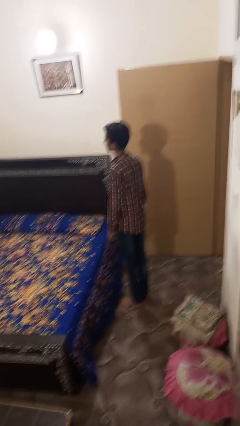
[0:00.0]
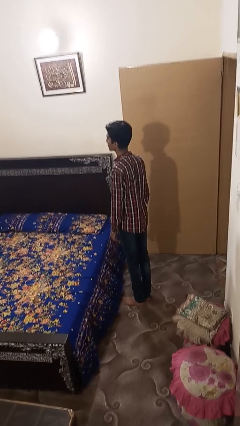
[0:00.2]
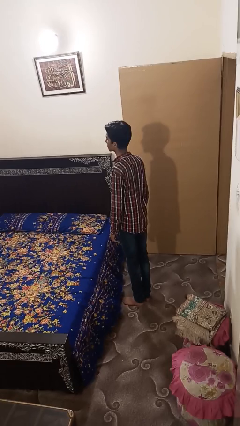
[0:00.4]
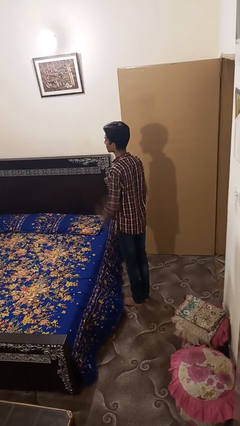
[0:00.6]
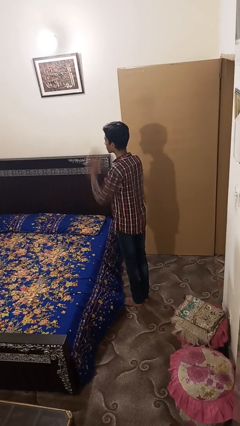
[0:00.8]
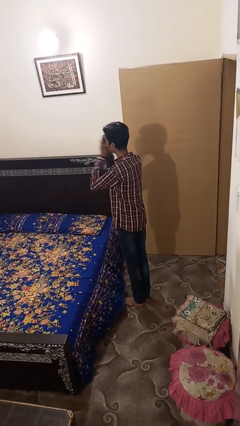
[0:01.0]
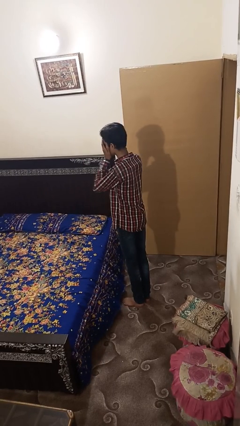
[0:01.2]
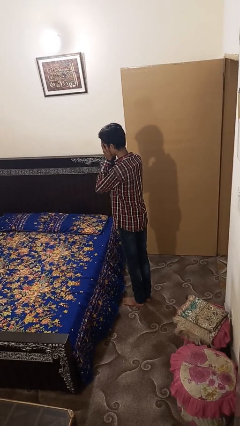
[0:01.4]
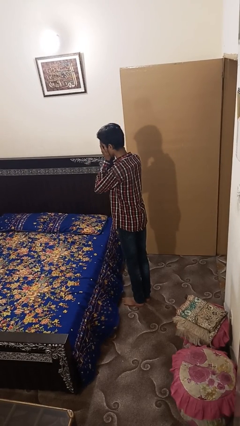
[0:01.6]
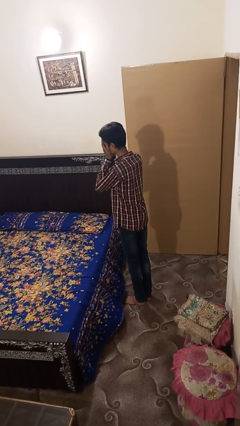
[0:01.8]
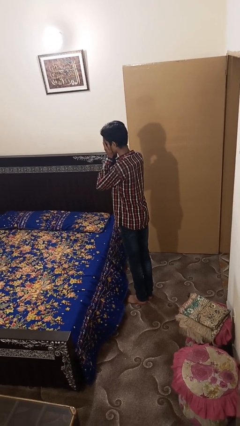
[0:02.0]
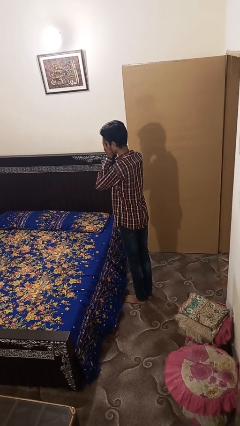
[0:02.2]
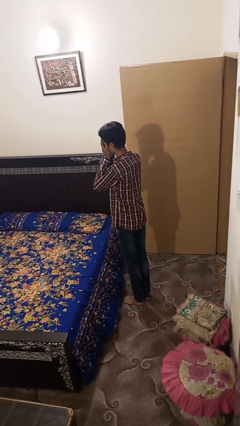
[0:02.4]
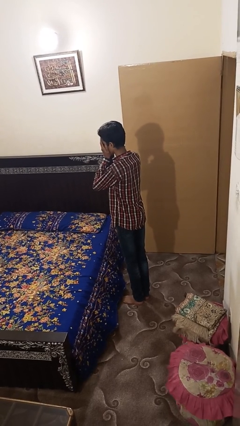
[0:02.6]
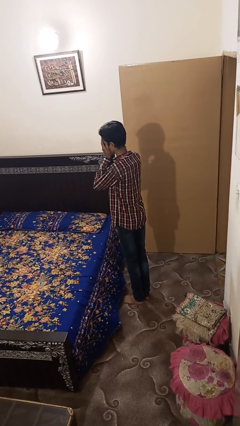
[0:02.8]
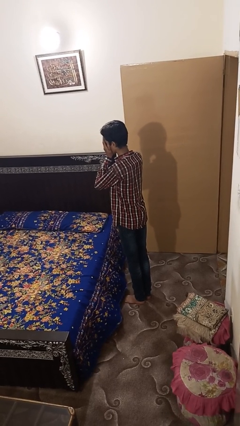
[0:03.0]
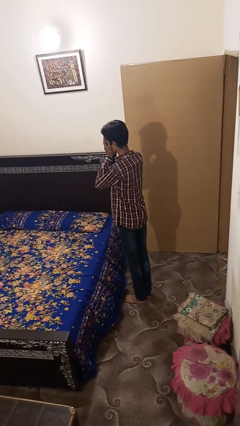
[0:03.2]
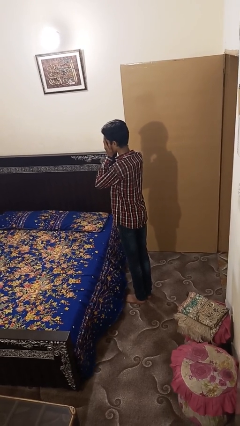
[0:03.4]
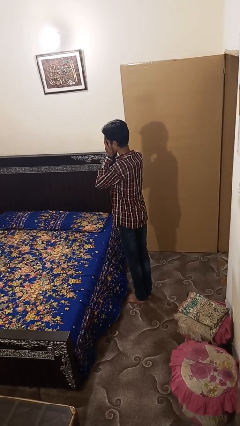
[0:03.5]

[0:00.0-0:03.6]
person covers face with hands

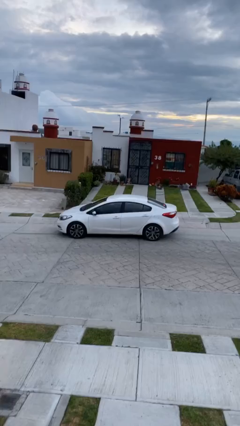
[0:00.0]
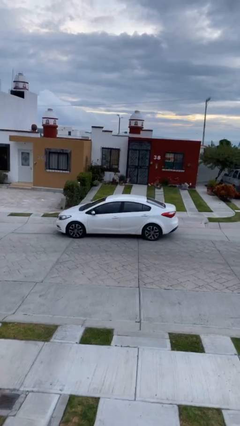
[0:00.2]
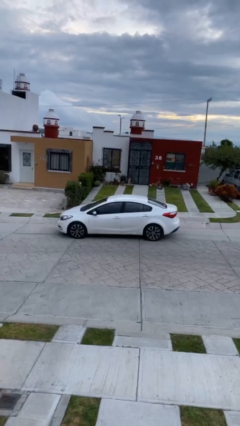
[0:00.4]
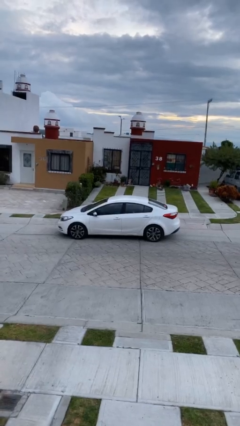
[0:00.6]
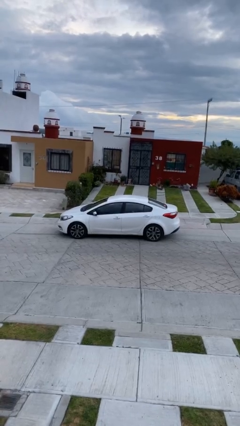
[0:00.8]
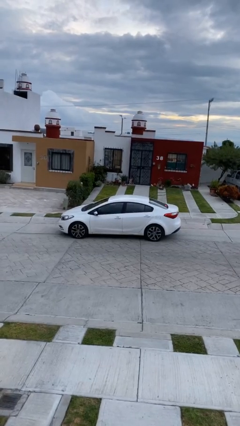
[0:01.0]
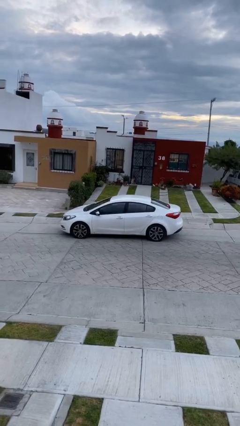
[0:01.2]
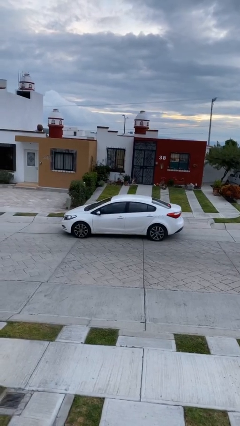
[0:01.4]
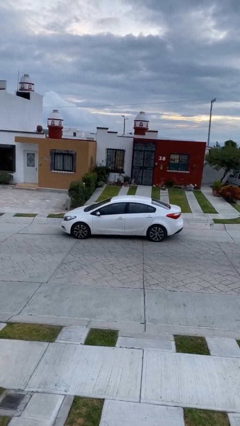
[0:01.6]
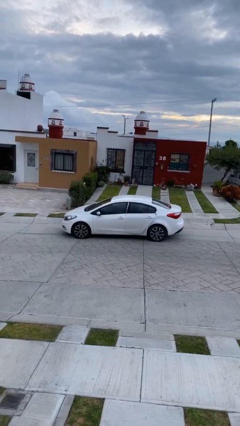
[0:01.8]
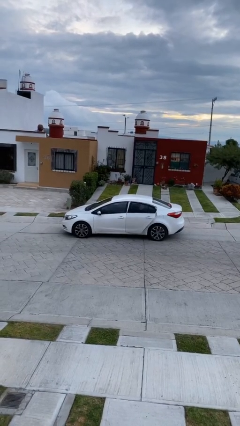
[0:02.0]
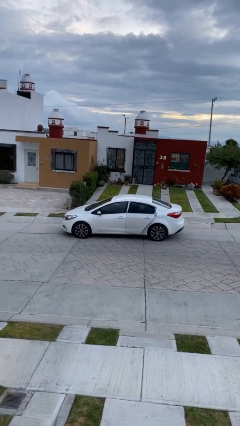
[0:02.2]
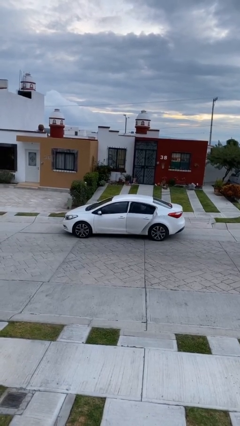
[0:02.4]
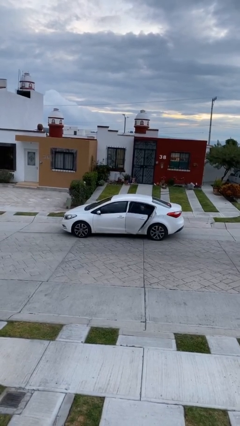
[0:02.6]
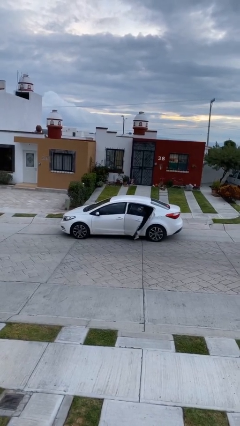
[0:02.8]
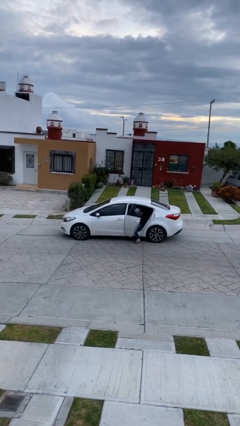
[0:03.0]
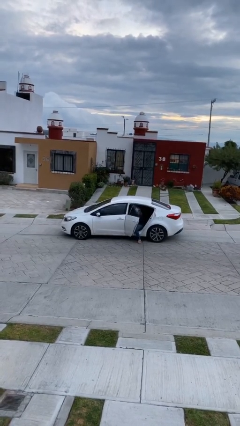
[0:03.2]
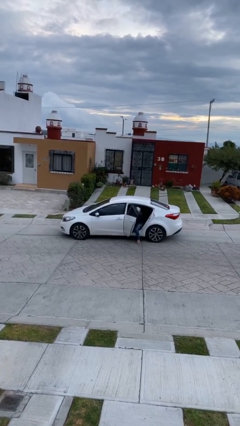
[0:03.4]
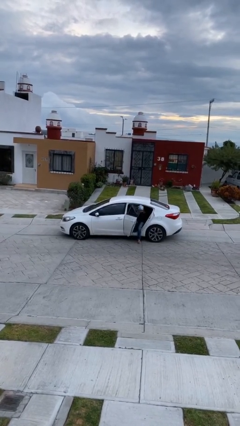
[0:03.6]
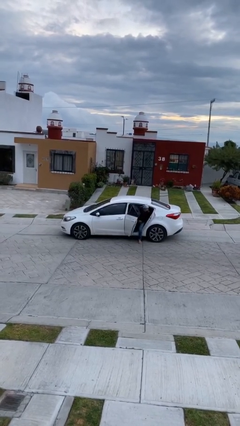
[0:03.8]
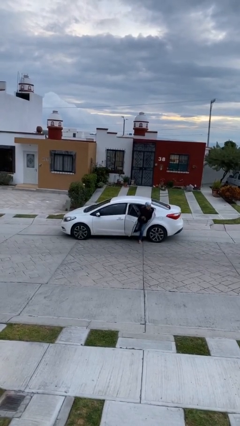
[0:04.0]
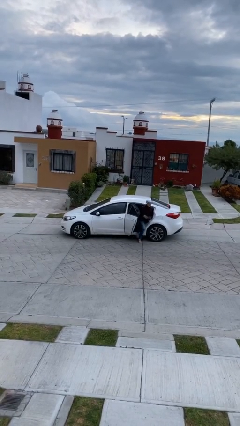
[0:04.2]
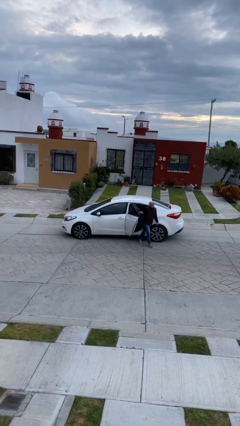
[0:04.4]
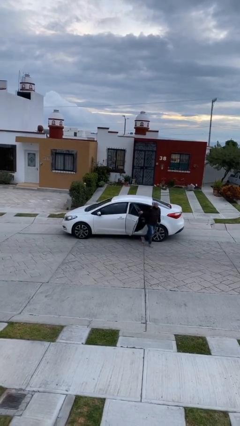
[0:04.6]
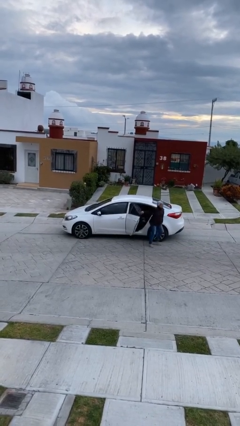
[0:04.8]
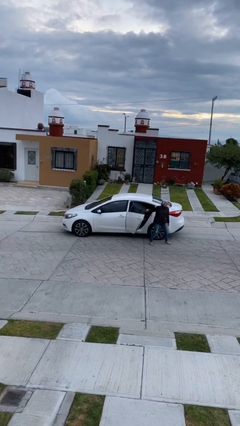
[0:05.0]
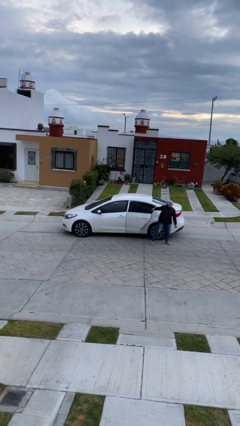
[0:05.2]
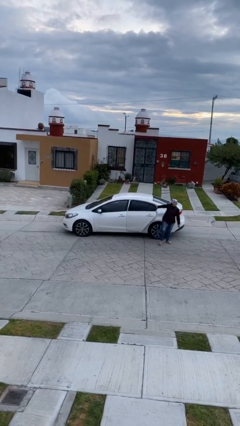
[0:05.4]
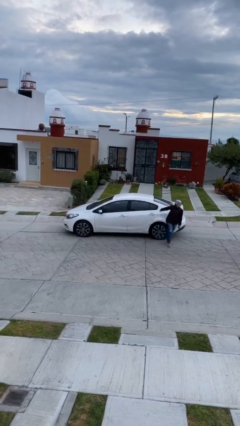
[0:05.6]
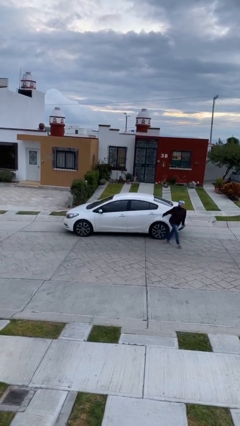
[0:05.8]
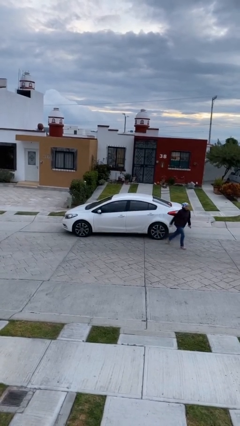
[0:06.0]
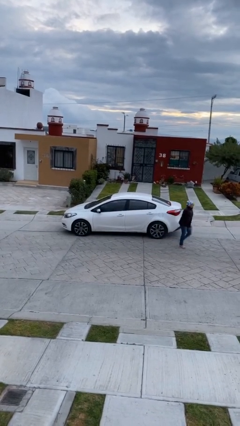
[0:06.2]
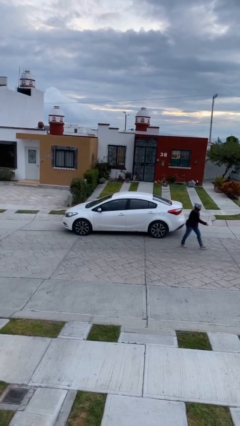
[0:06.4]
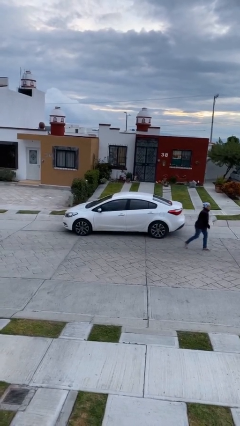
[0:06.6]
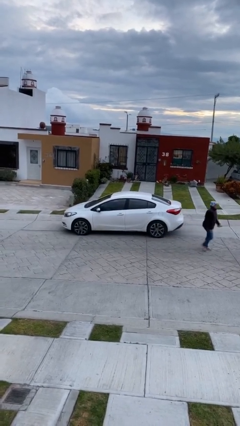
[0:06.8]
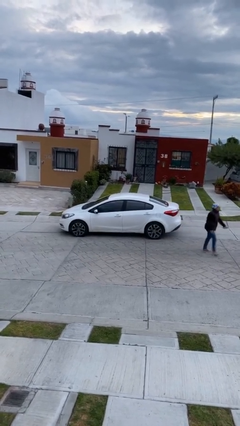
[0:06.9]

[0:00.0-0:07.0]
car drops off person

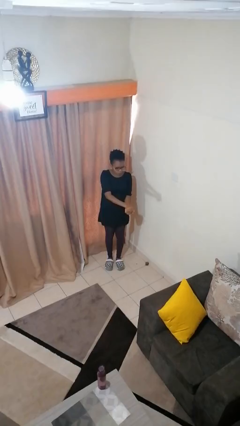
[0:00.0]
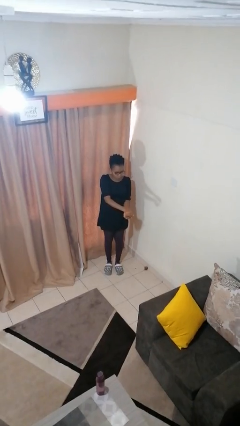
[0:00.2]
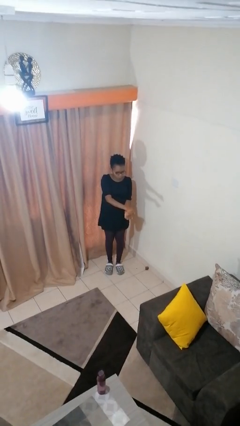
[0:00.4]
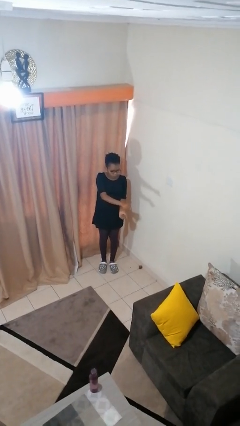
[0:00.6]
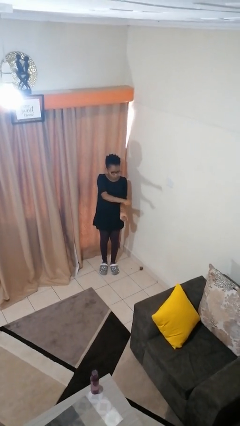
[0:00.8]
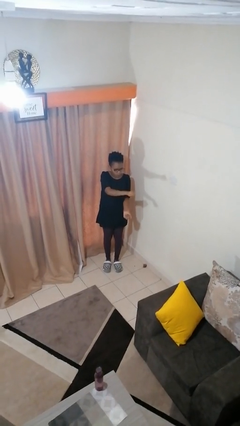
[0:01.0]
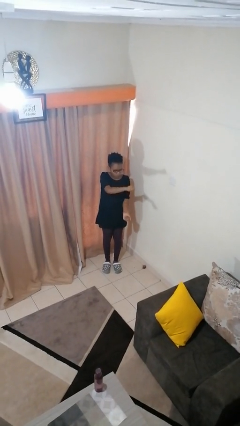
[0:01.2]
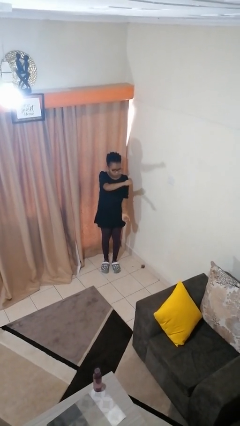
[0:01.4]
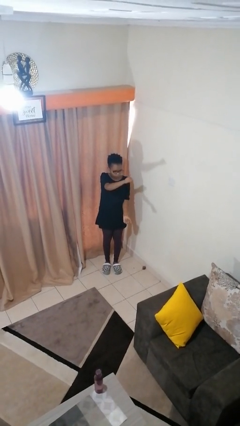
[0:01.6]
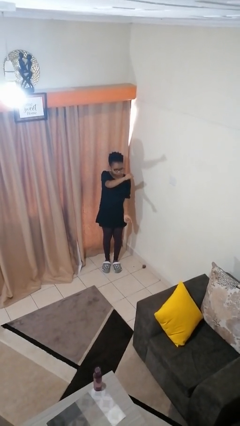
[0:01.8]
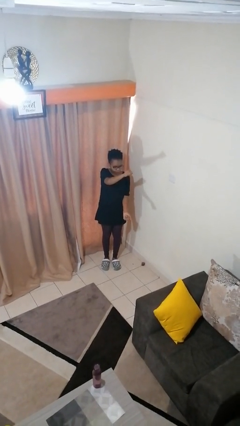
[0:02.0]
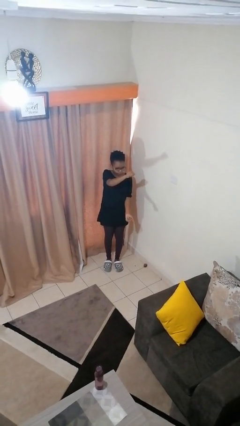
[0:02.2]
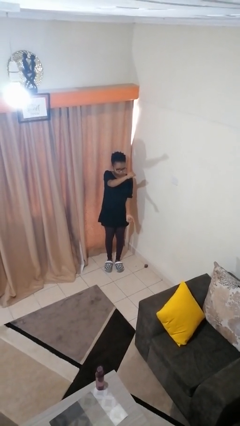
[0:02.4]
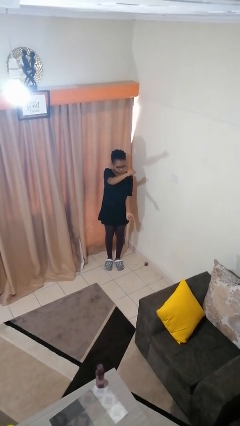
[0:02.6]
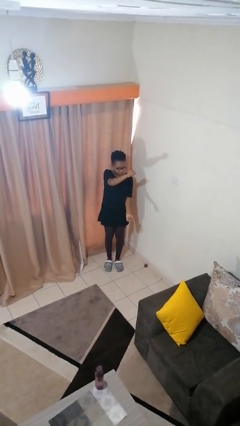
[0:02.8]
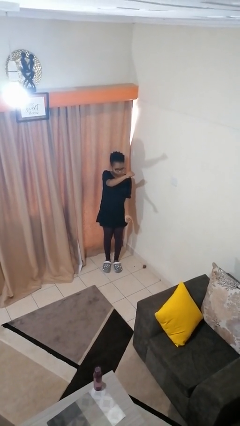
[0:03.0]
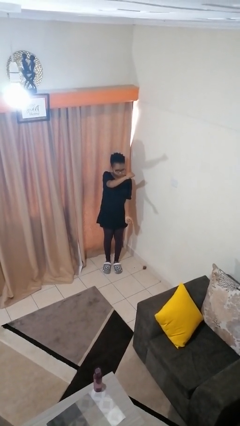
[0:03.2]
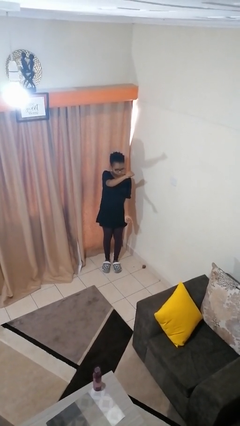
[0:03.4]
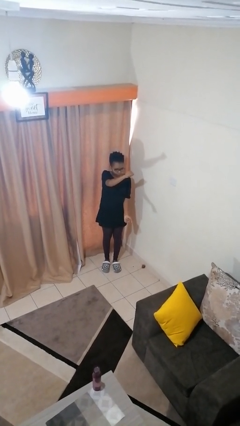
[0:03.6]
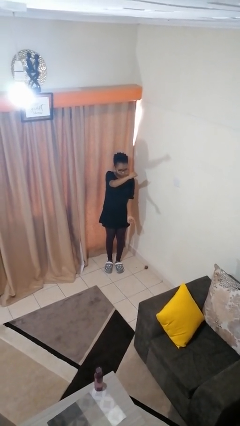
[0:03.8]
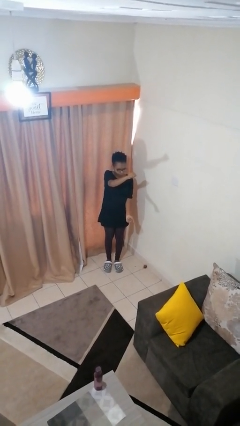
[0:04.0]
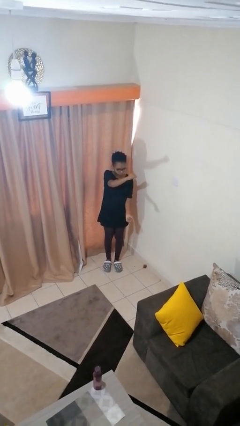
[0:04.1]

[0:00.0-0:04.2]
person gestures zoom in

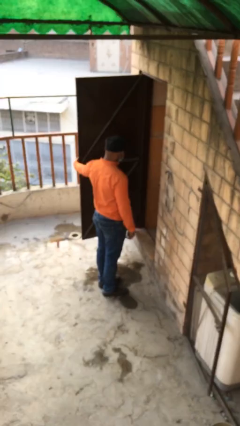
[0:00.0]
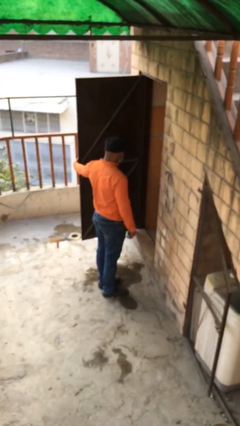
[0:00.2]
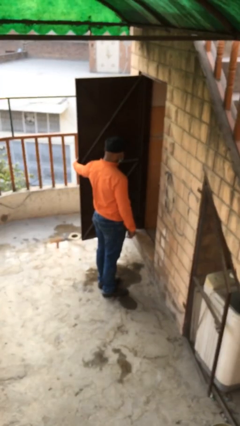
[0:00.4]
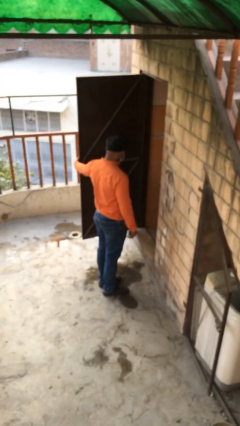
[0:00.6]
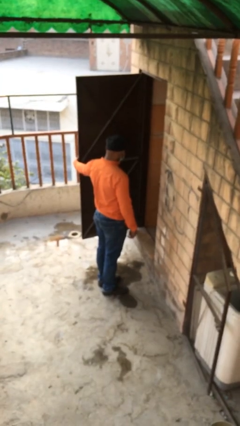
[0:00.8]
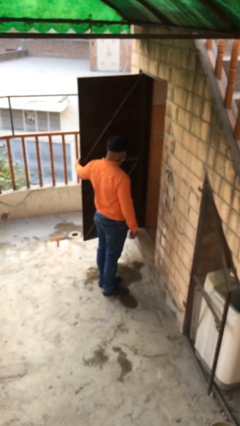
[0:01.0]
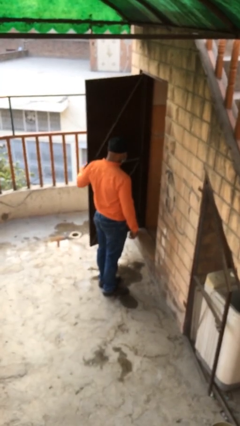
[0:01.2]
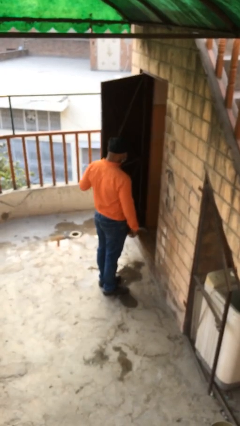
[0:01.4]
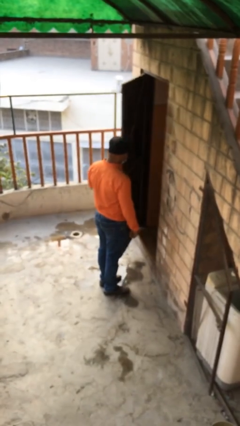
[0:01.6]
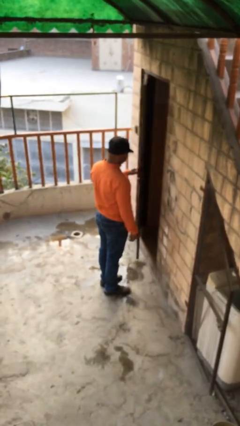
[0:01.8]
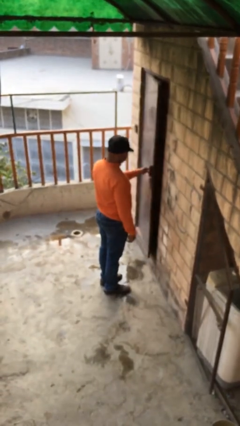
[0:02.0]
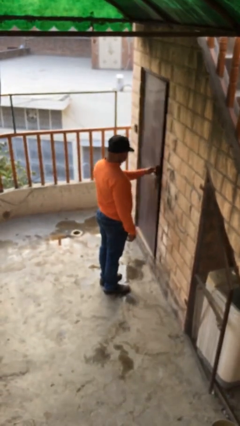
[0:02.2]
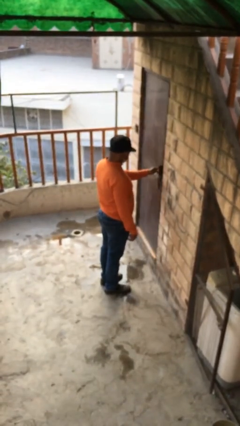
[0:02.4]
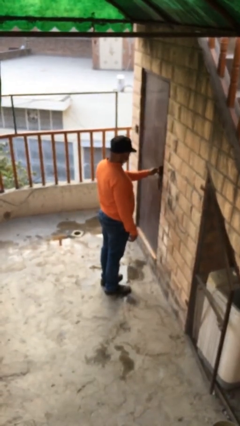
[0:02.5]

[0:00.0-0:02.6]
person closes facility door

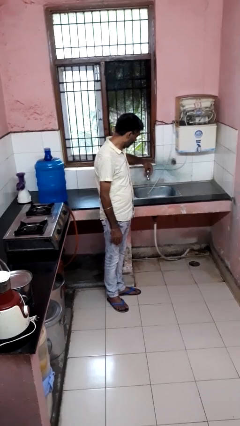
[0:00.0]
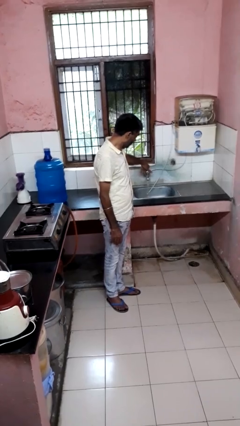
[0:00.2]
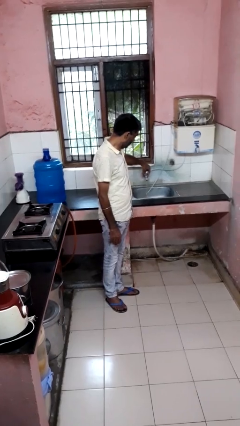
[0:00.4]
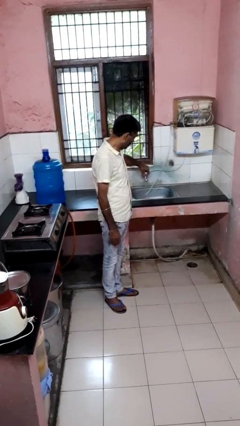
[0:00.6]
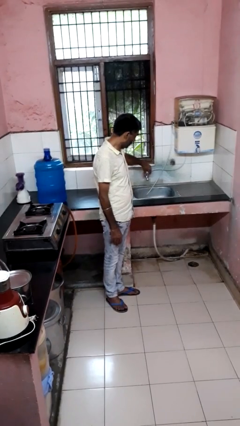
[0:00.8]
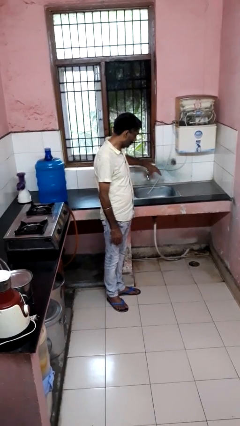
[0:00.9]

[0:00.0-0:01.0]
person turns off faucet
